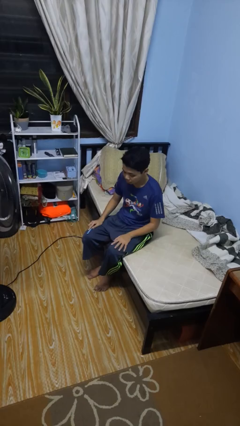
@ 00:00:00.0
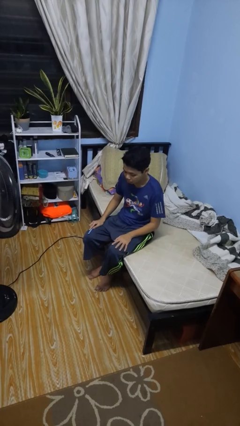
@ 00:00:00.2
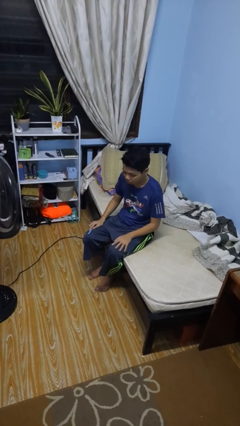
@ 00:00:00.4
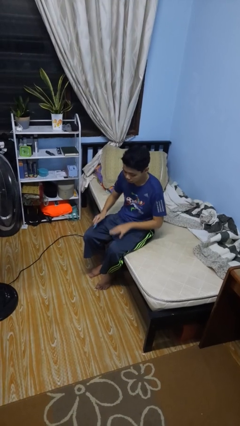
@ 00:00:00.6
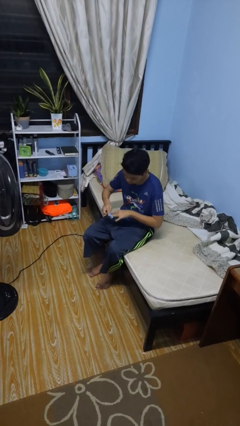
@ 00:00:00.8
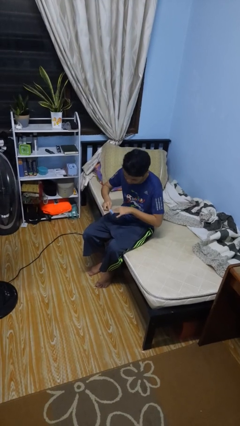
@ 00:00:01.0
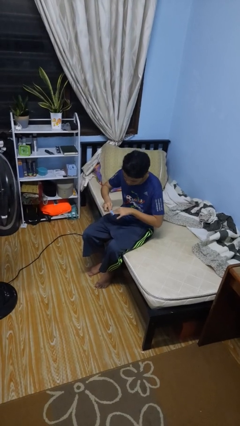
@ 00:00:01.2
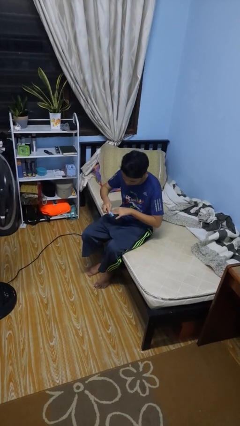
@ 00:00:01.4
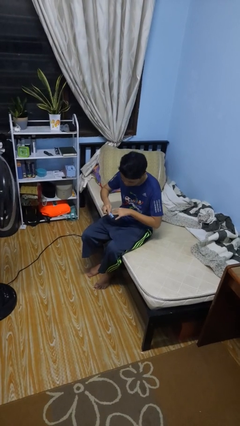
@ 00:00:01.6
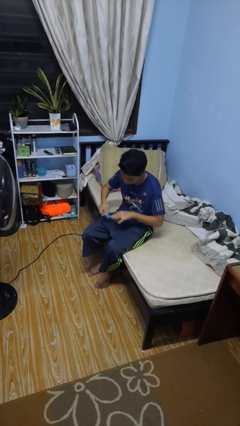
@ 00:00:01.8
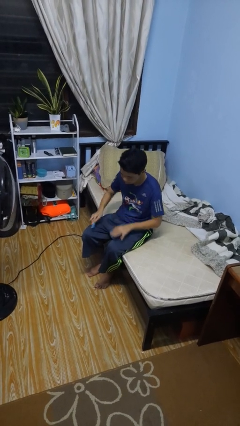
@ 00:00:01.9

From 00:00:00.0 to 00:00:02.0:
person files fingernails

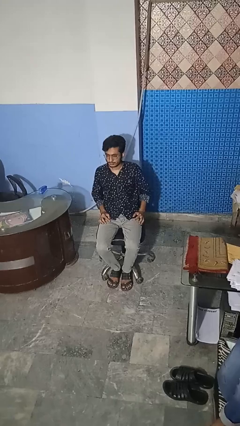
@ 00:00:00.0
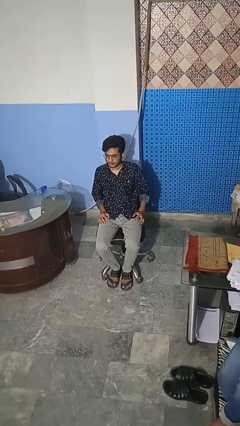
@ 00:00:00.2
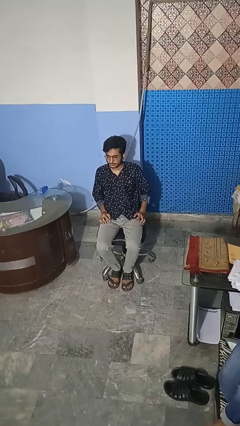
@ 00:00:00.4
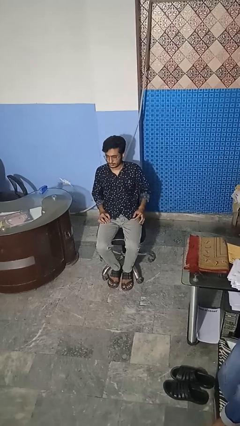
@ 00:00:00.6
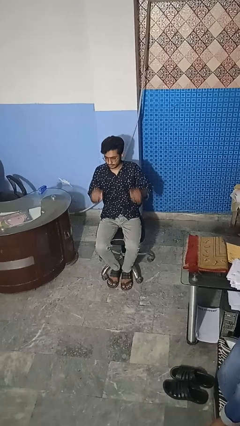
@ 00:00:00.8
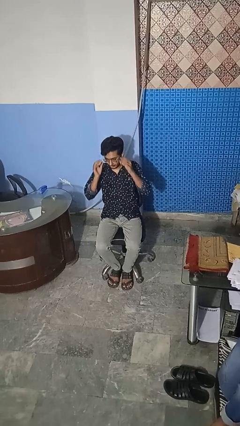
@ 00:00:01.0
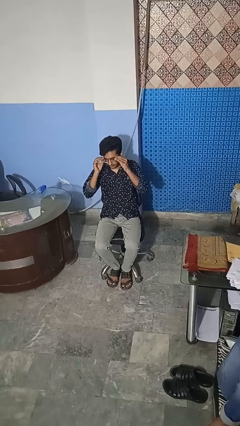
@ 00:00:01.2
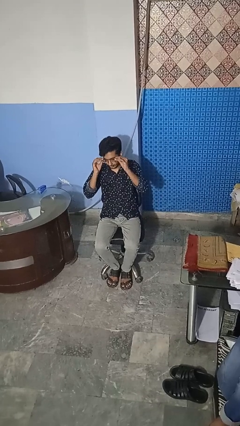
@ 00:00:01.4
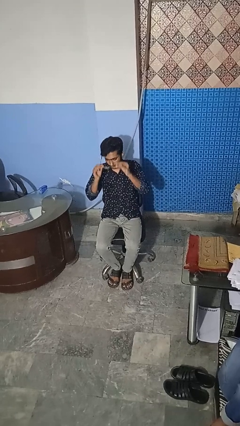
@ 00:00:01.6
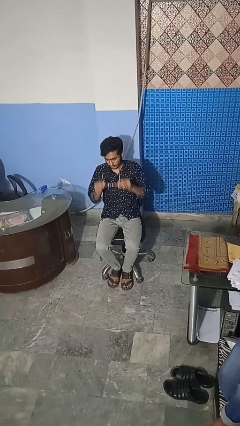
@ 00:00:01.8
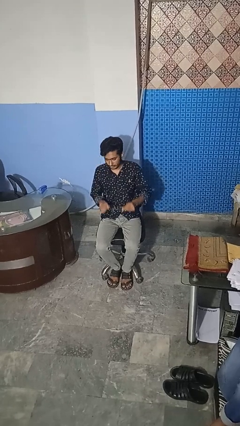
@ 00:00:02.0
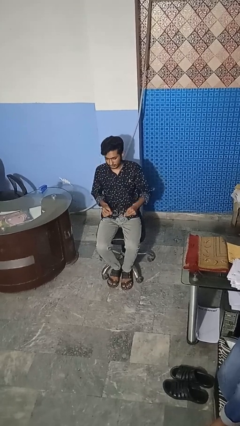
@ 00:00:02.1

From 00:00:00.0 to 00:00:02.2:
person takes off glasses

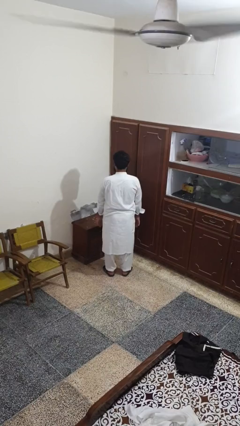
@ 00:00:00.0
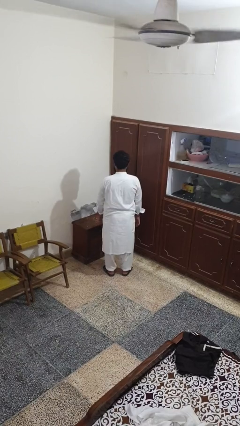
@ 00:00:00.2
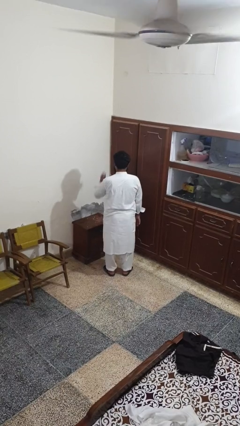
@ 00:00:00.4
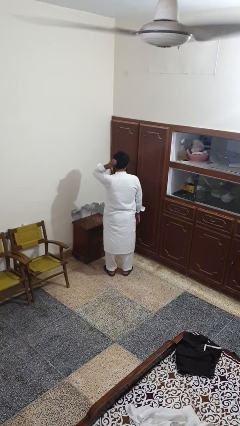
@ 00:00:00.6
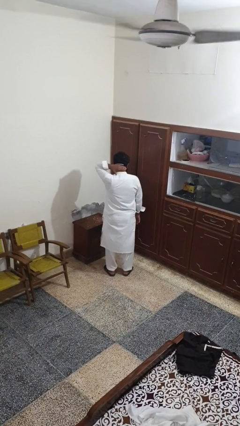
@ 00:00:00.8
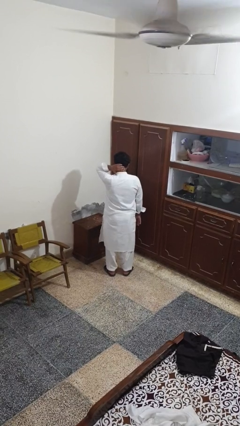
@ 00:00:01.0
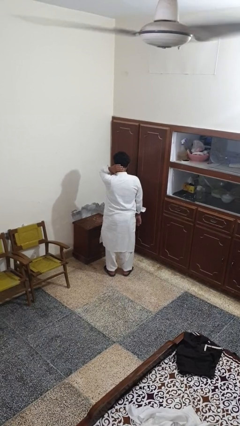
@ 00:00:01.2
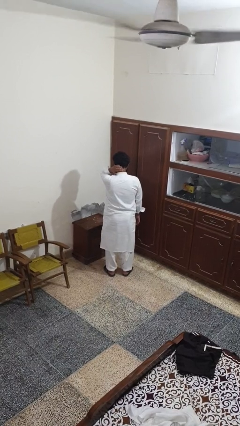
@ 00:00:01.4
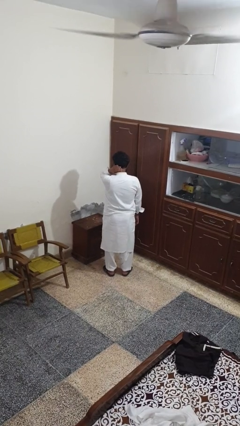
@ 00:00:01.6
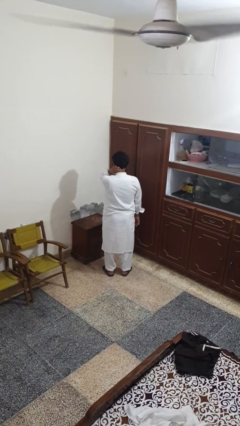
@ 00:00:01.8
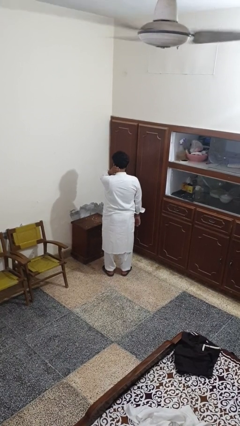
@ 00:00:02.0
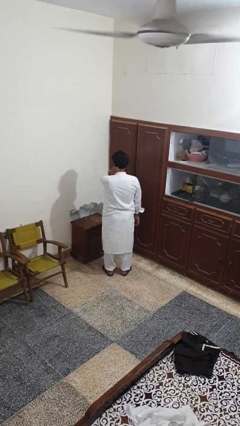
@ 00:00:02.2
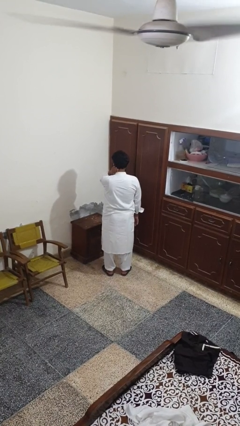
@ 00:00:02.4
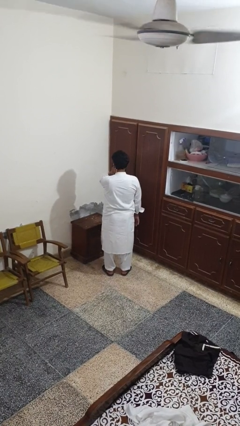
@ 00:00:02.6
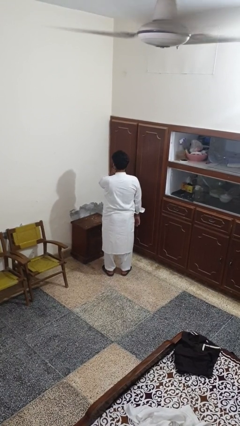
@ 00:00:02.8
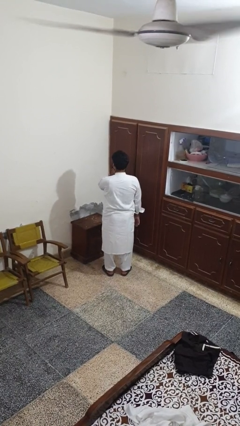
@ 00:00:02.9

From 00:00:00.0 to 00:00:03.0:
person rubs neck

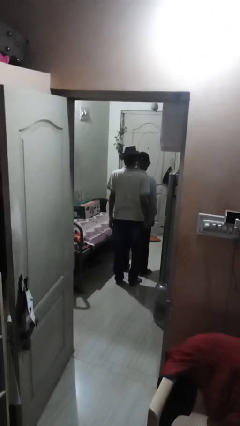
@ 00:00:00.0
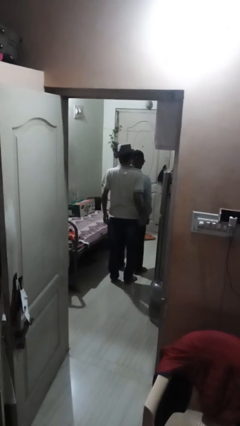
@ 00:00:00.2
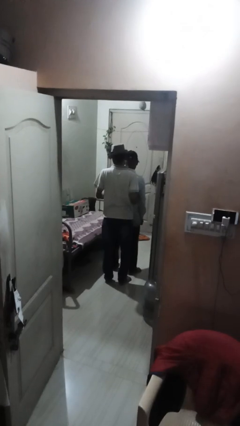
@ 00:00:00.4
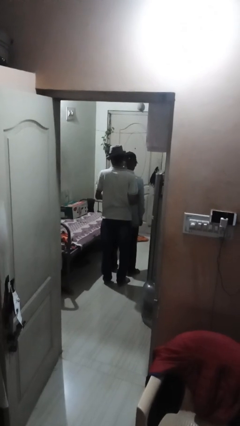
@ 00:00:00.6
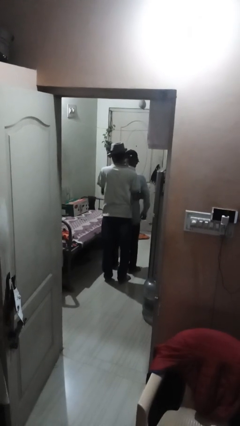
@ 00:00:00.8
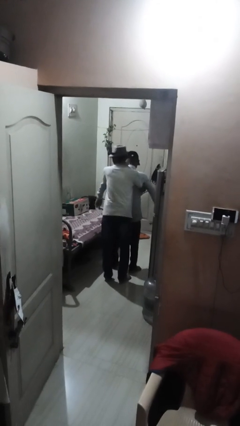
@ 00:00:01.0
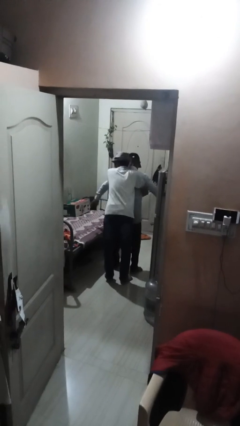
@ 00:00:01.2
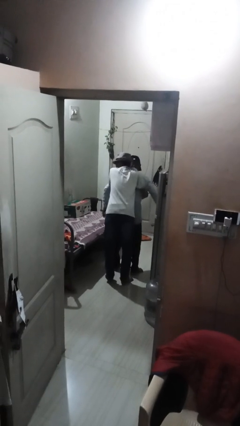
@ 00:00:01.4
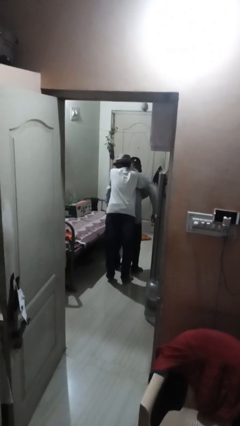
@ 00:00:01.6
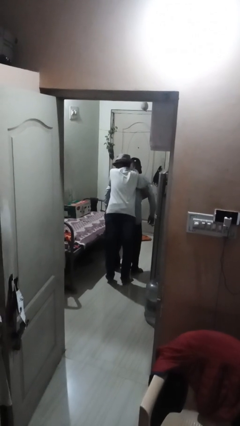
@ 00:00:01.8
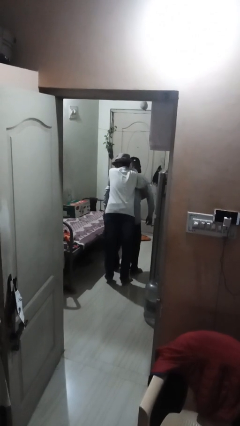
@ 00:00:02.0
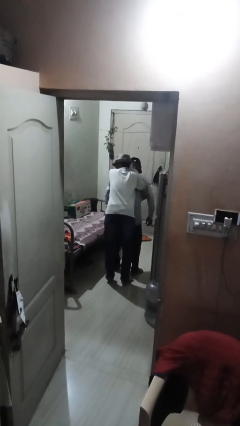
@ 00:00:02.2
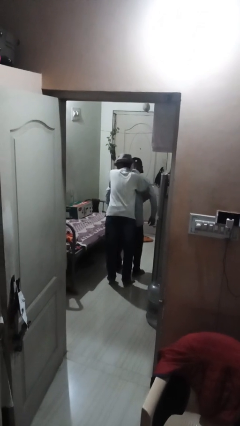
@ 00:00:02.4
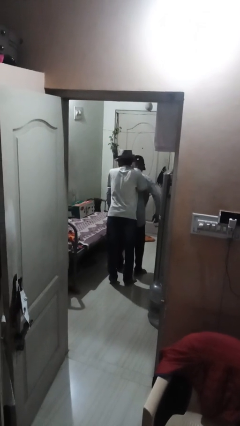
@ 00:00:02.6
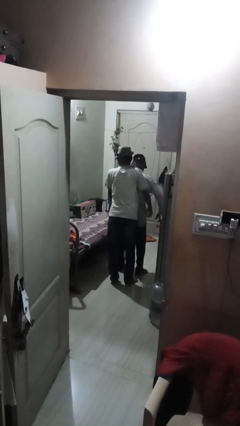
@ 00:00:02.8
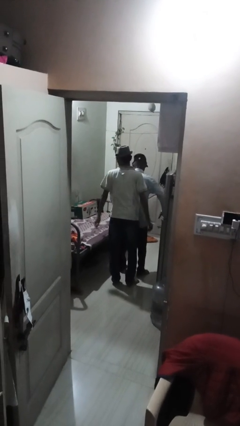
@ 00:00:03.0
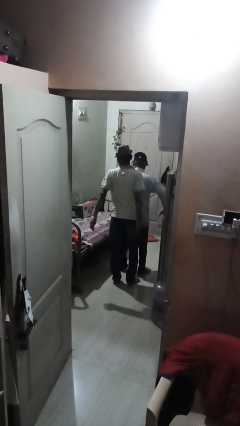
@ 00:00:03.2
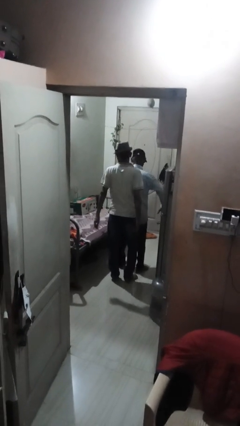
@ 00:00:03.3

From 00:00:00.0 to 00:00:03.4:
person hugs person from behind

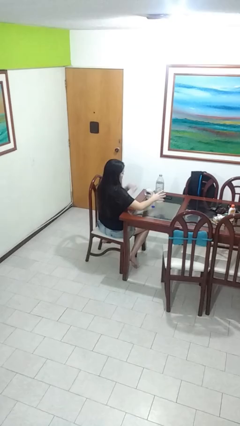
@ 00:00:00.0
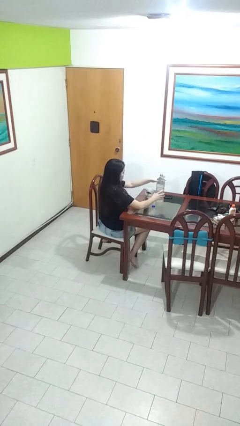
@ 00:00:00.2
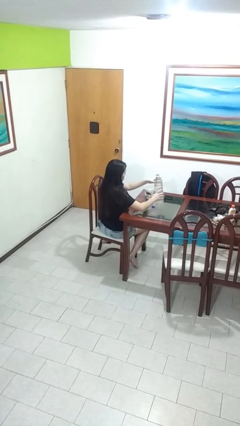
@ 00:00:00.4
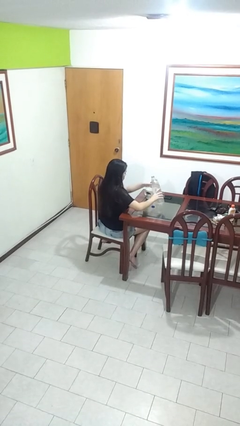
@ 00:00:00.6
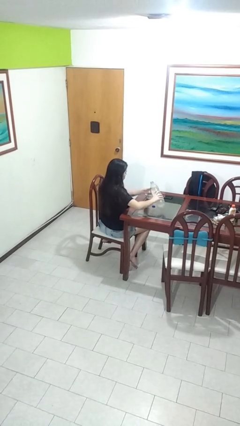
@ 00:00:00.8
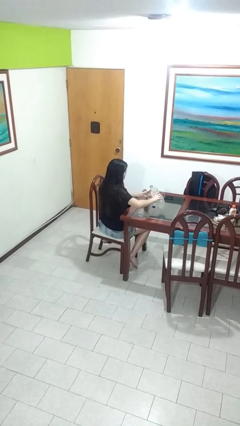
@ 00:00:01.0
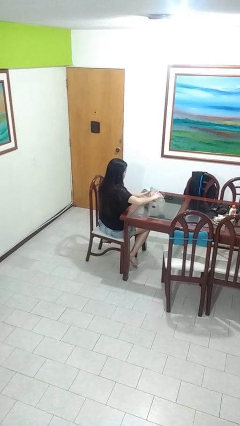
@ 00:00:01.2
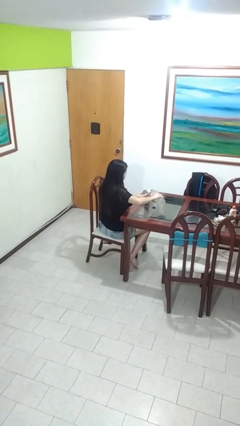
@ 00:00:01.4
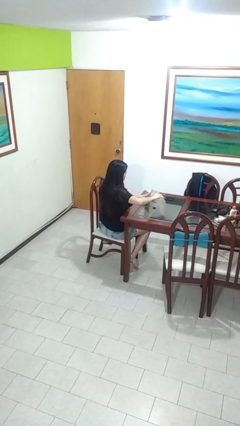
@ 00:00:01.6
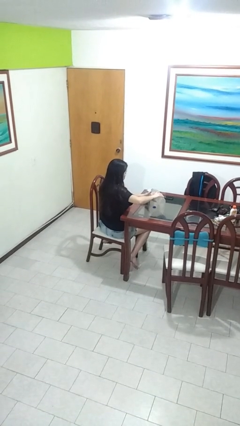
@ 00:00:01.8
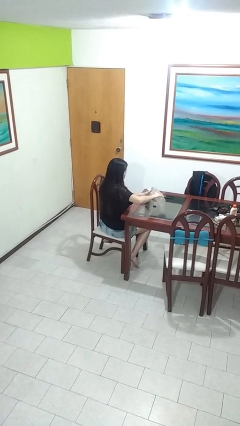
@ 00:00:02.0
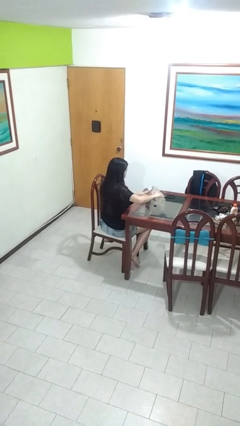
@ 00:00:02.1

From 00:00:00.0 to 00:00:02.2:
person pours liquid into cup

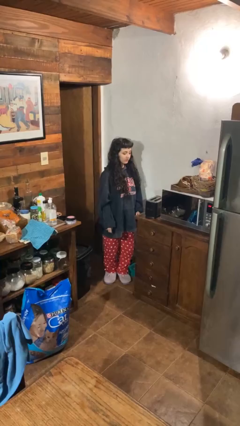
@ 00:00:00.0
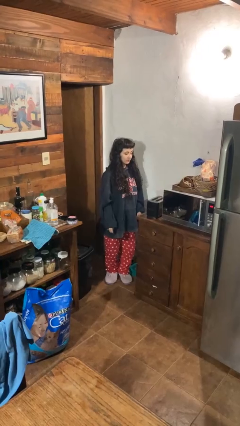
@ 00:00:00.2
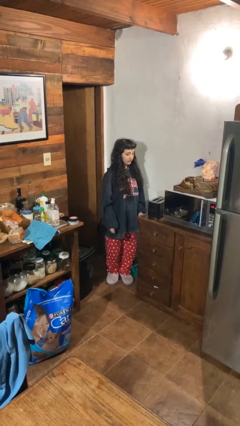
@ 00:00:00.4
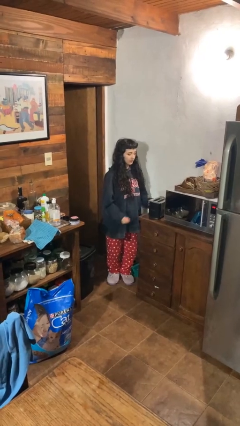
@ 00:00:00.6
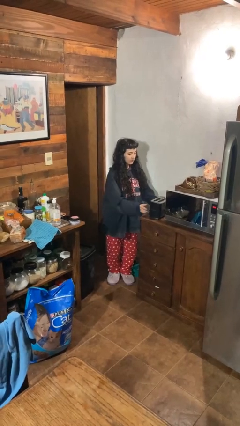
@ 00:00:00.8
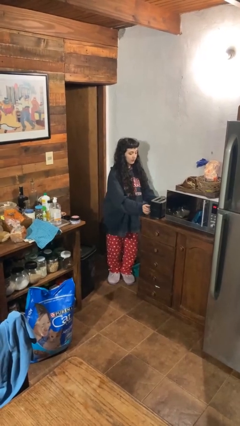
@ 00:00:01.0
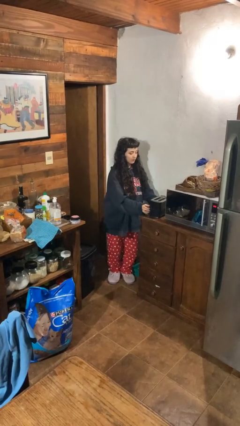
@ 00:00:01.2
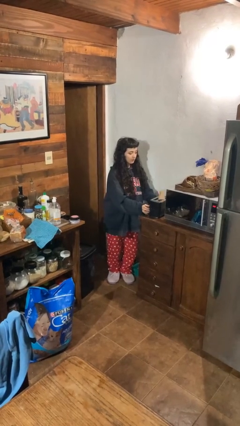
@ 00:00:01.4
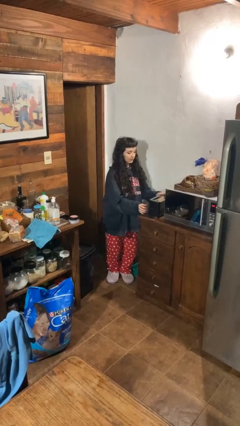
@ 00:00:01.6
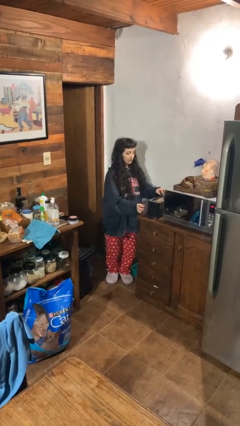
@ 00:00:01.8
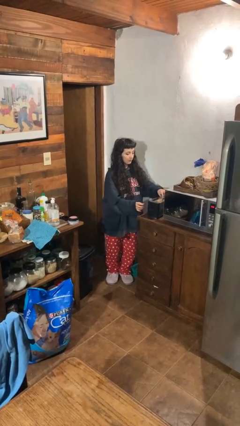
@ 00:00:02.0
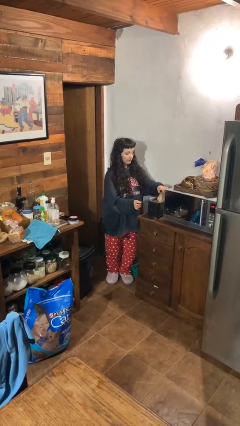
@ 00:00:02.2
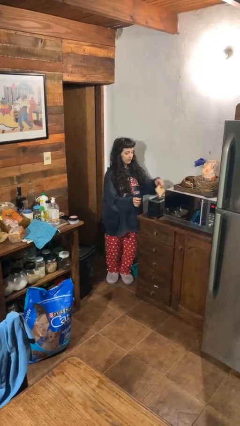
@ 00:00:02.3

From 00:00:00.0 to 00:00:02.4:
person takes object from toaster

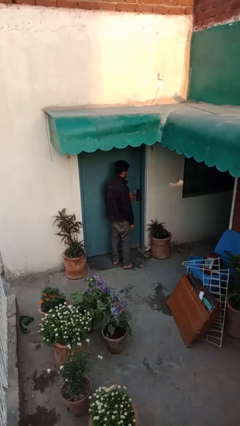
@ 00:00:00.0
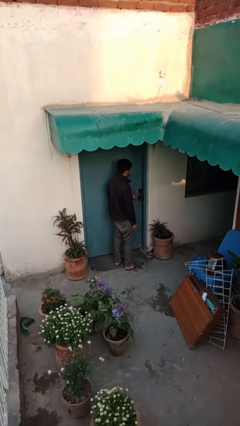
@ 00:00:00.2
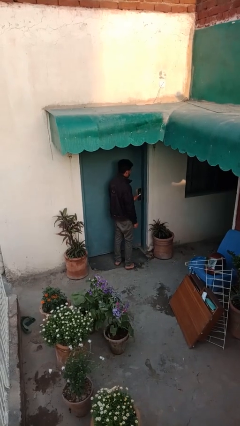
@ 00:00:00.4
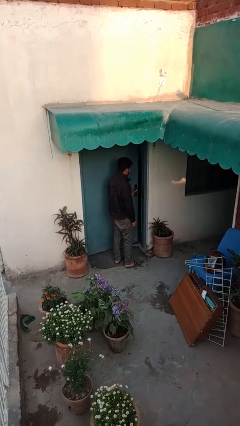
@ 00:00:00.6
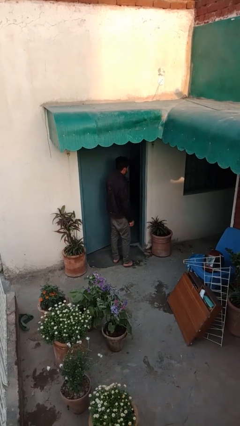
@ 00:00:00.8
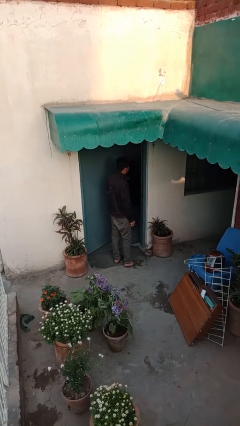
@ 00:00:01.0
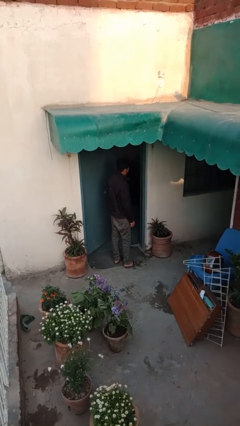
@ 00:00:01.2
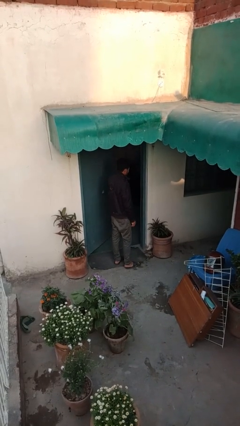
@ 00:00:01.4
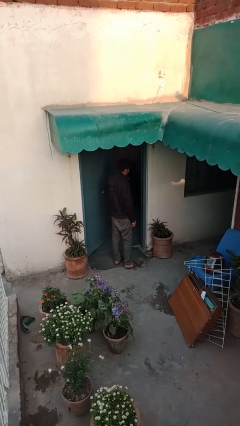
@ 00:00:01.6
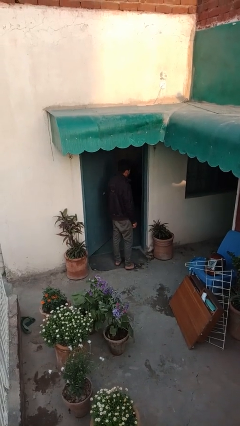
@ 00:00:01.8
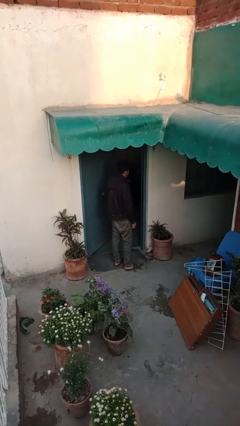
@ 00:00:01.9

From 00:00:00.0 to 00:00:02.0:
person opens facility door
